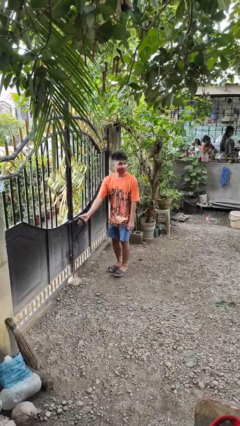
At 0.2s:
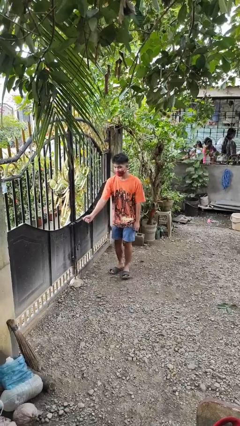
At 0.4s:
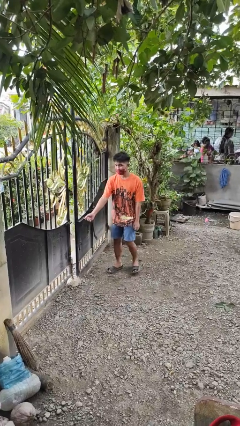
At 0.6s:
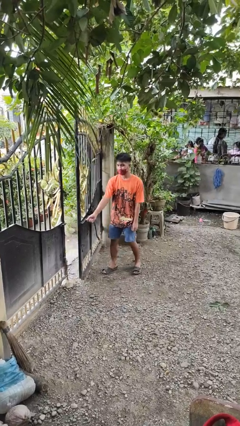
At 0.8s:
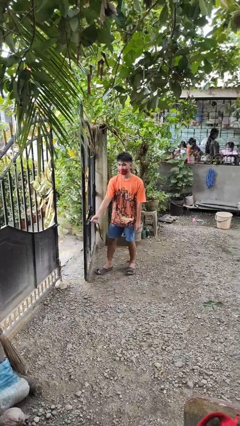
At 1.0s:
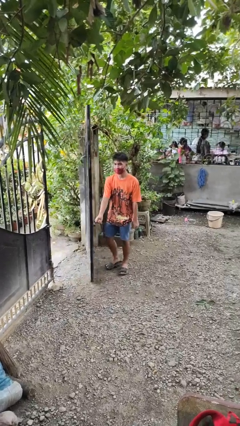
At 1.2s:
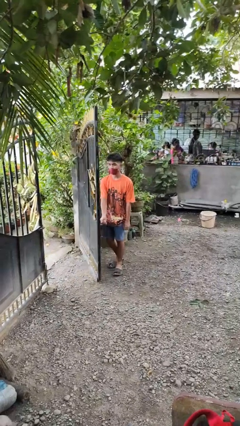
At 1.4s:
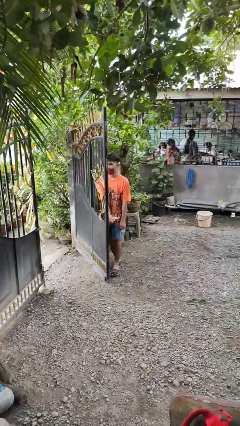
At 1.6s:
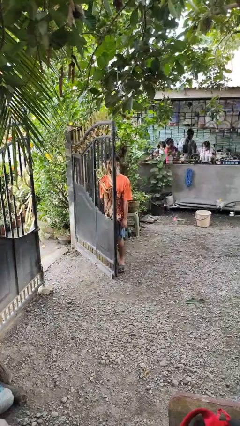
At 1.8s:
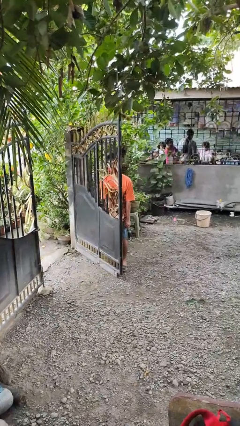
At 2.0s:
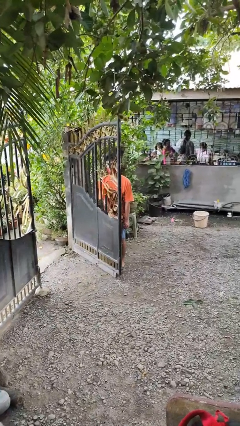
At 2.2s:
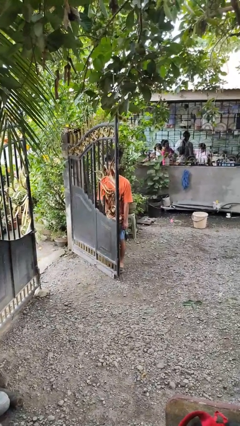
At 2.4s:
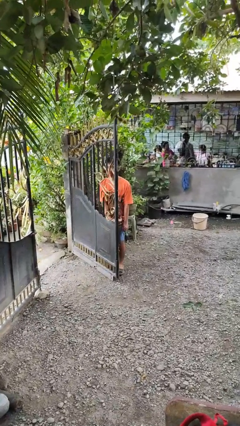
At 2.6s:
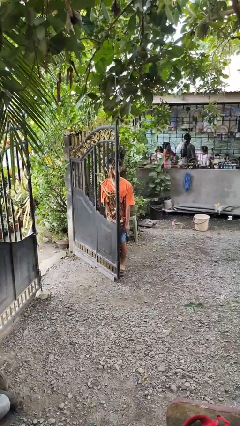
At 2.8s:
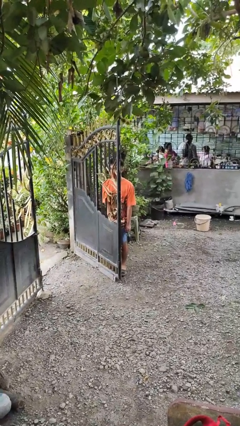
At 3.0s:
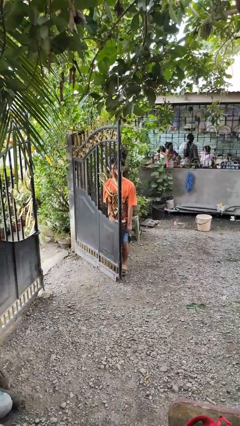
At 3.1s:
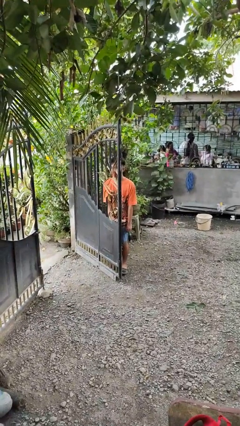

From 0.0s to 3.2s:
person opens gate

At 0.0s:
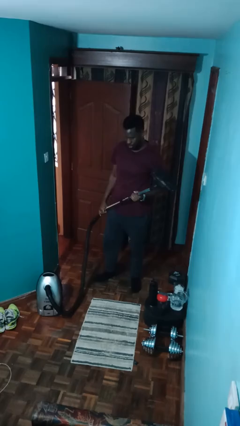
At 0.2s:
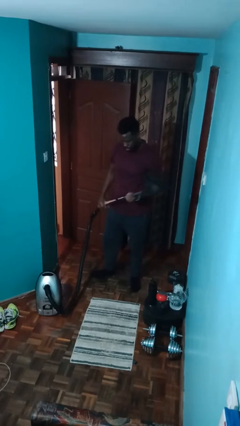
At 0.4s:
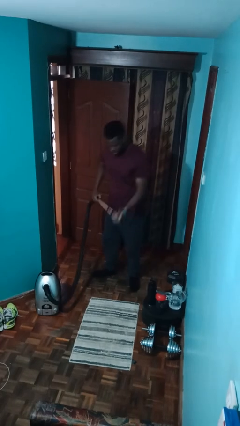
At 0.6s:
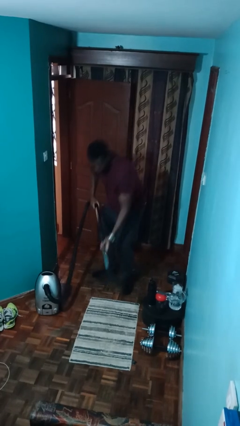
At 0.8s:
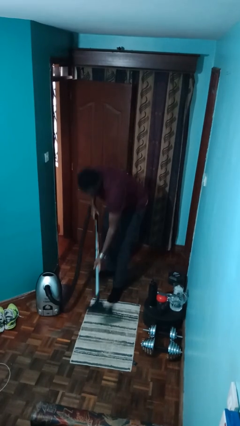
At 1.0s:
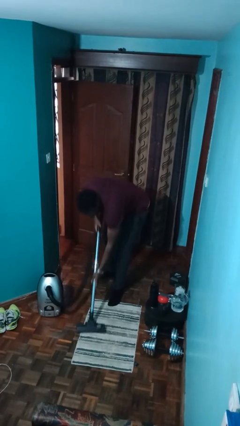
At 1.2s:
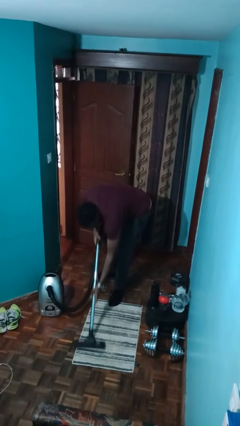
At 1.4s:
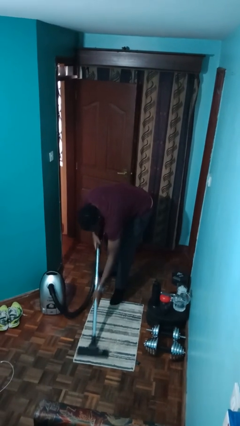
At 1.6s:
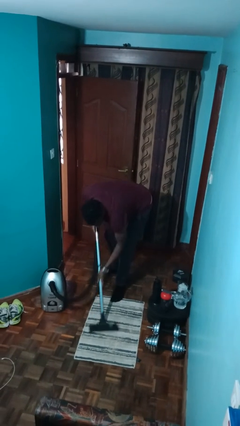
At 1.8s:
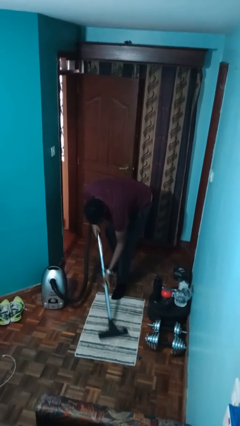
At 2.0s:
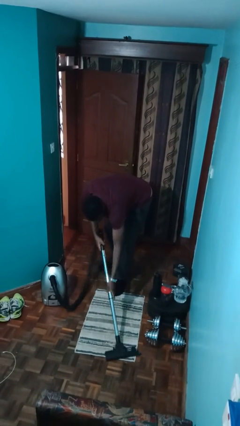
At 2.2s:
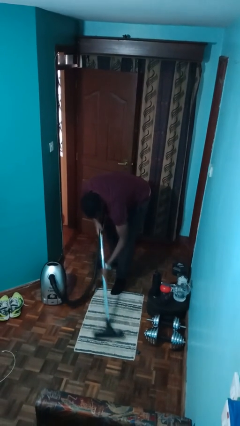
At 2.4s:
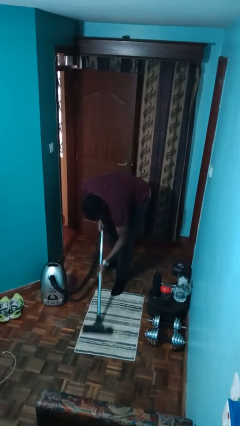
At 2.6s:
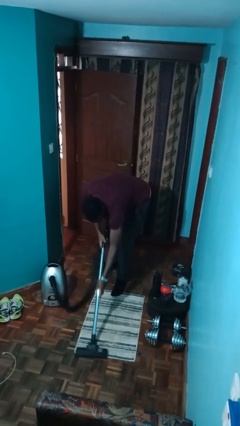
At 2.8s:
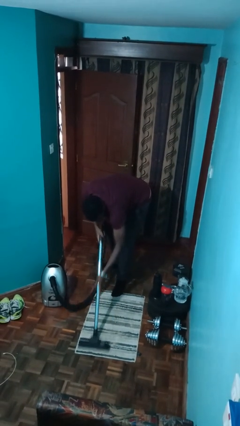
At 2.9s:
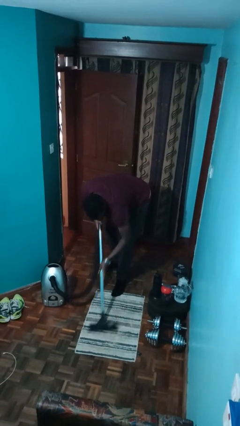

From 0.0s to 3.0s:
person vacuums carpet

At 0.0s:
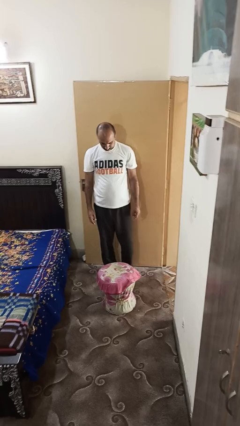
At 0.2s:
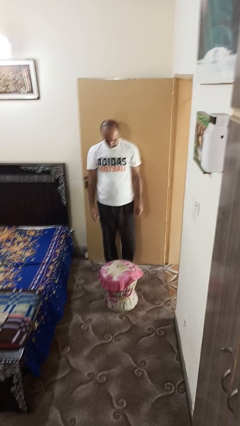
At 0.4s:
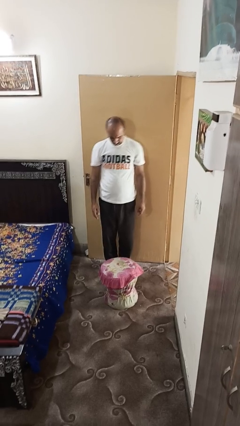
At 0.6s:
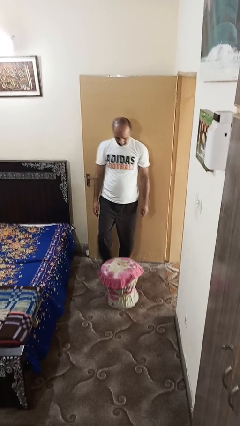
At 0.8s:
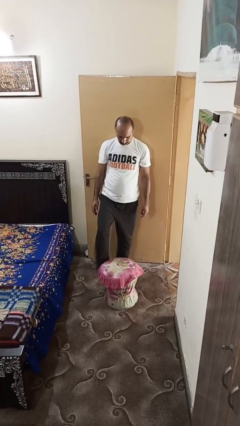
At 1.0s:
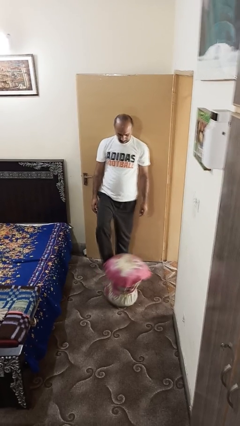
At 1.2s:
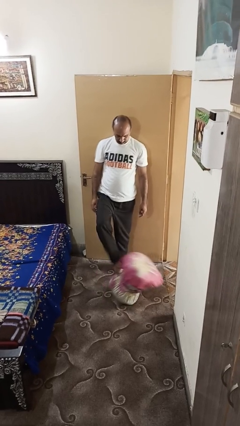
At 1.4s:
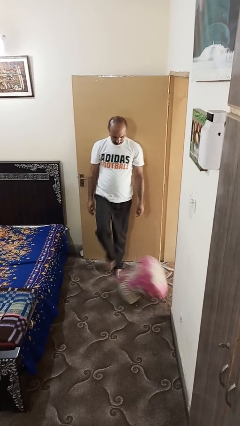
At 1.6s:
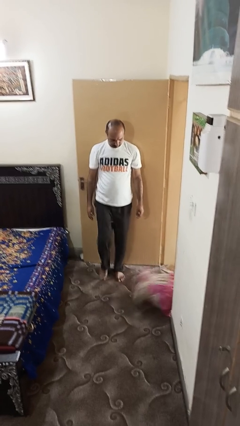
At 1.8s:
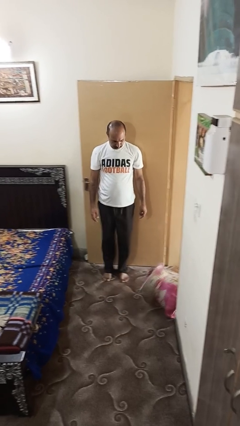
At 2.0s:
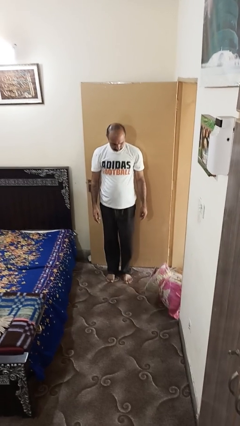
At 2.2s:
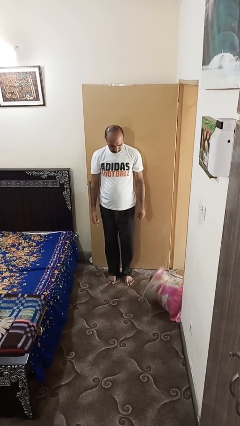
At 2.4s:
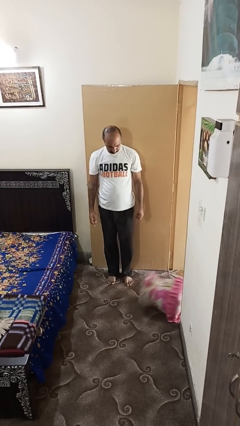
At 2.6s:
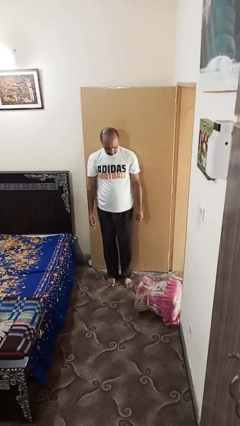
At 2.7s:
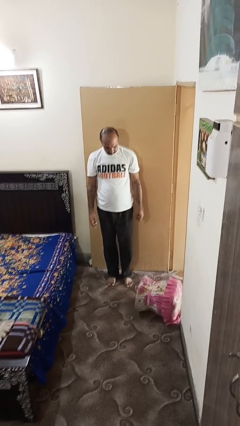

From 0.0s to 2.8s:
person knocks over furniture

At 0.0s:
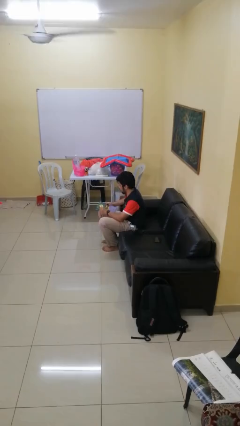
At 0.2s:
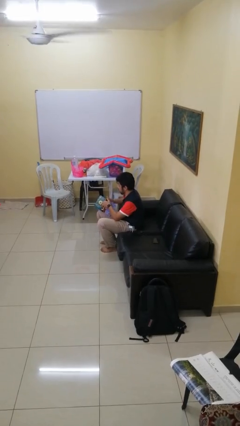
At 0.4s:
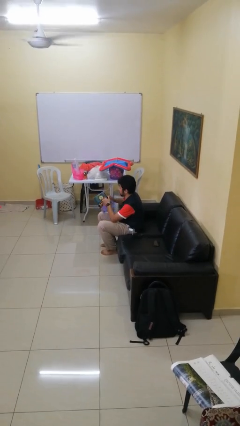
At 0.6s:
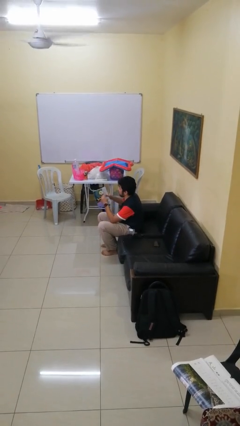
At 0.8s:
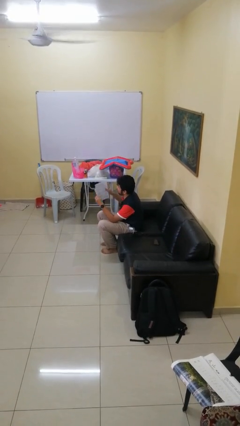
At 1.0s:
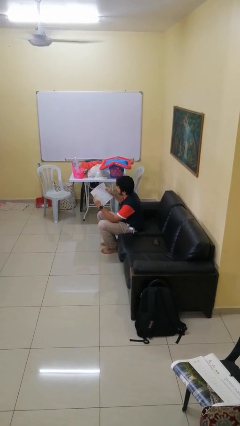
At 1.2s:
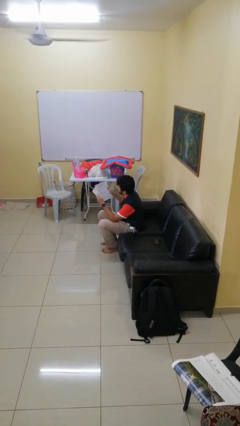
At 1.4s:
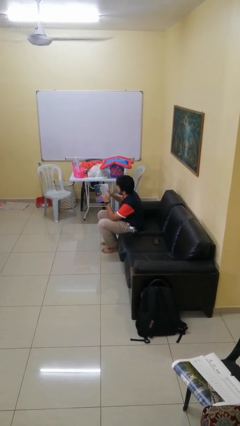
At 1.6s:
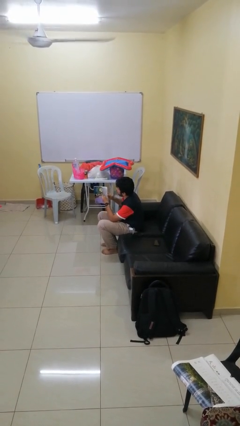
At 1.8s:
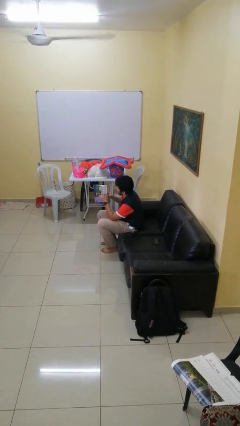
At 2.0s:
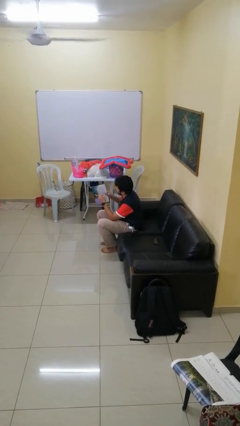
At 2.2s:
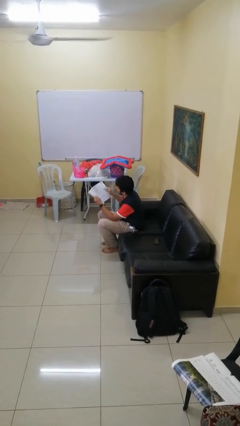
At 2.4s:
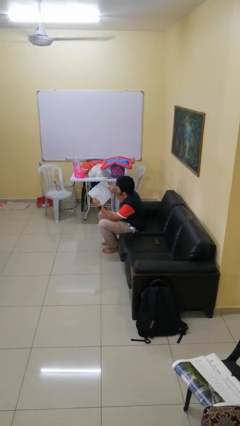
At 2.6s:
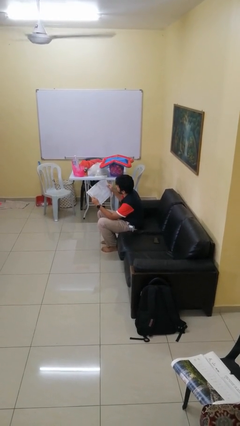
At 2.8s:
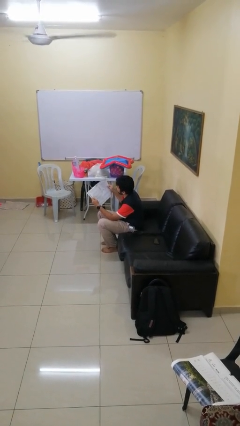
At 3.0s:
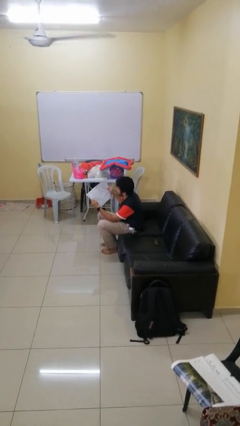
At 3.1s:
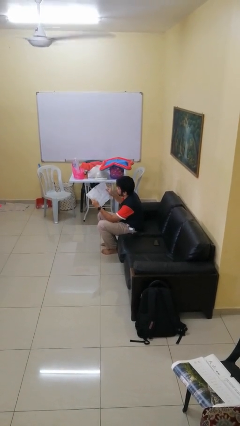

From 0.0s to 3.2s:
person reads magazine

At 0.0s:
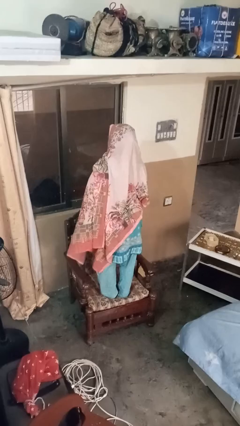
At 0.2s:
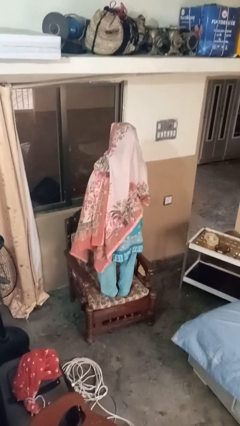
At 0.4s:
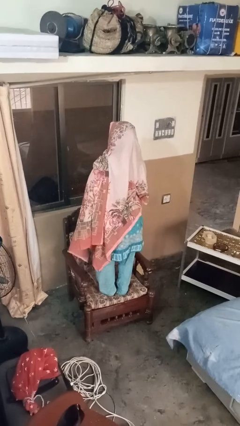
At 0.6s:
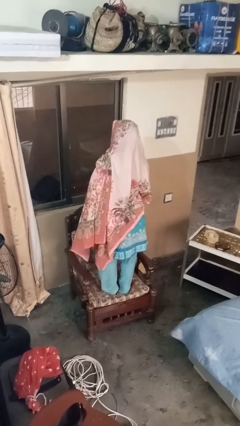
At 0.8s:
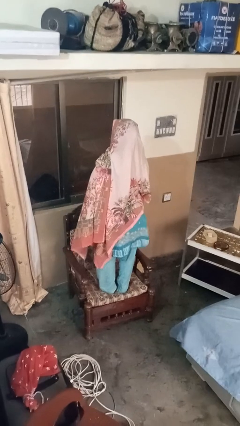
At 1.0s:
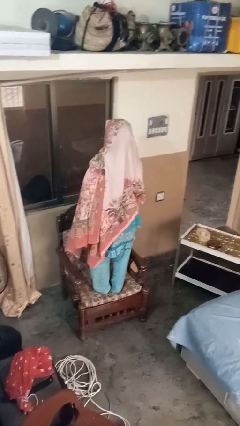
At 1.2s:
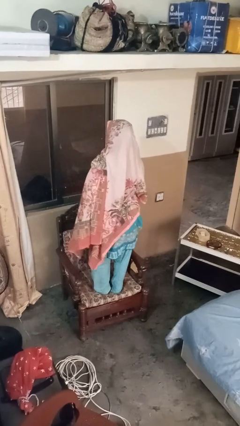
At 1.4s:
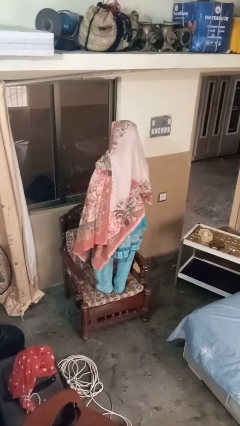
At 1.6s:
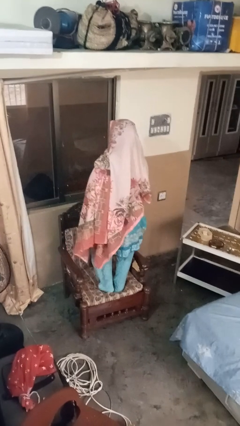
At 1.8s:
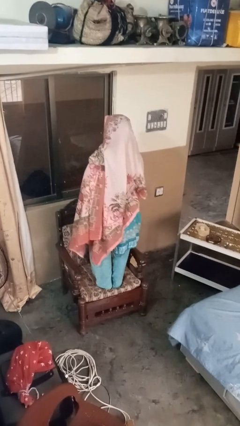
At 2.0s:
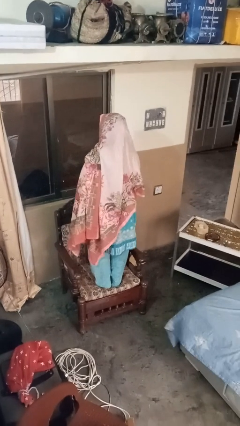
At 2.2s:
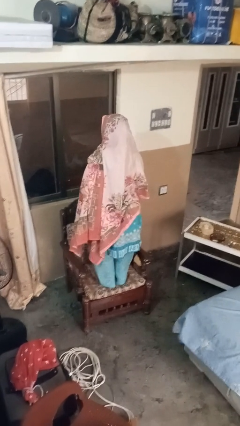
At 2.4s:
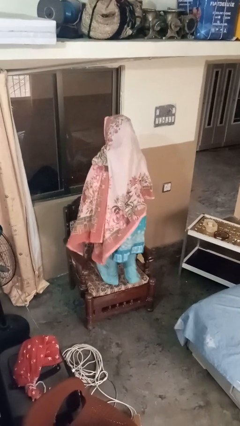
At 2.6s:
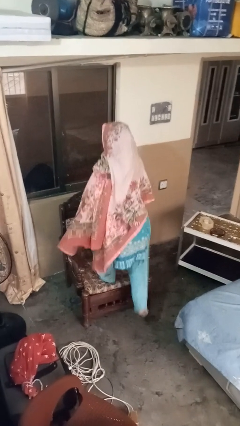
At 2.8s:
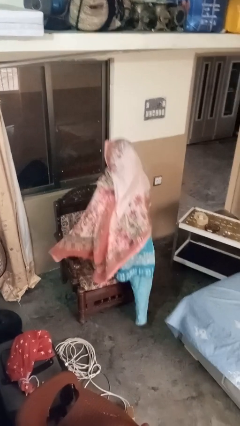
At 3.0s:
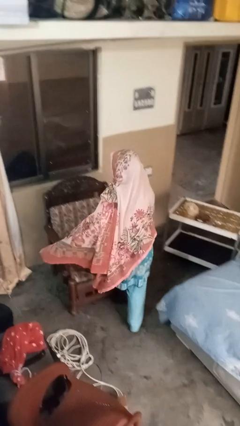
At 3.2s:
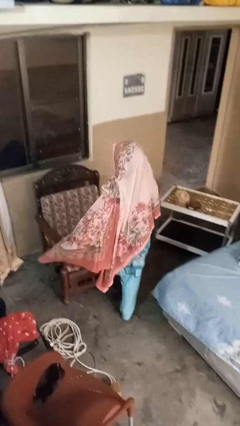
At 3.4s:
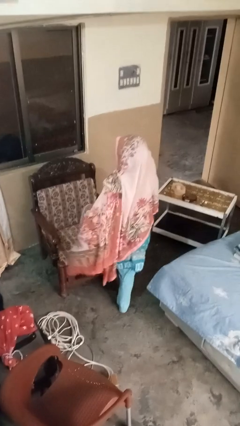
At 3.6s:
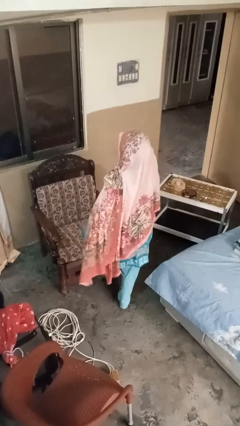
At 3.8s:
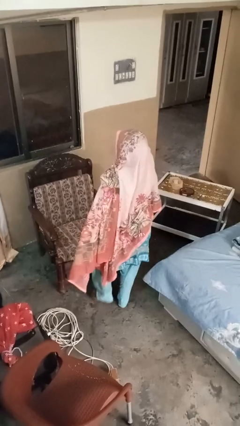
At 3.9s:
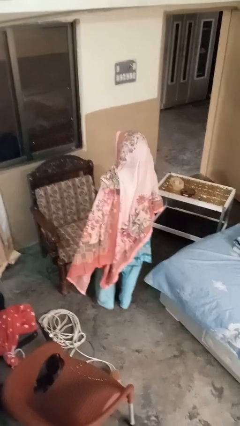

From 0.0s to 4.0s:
person climbs off couch

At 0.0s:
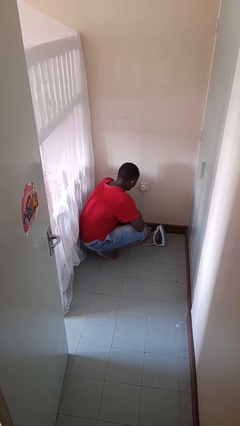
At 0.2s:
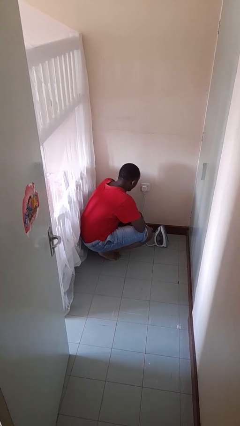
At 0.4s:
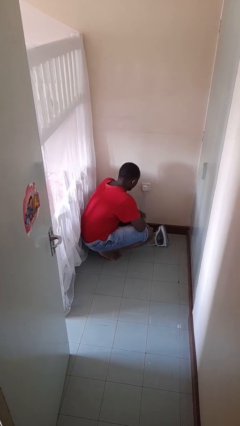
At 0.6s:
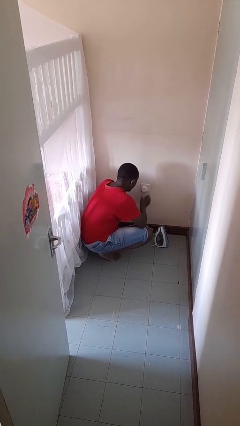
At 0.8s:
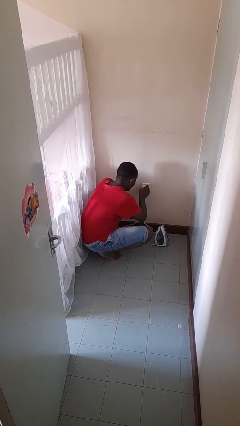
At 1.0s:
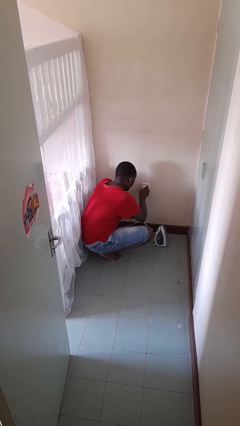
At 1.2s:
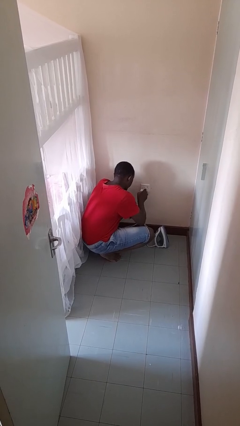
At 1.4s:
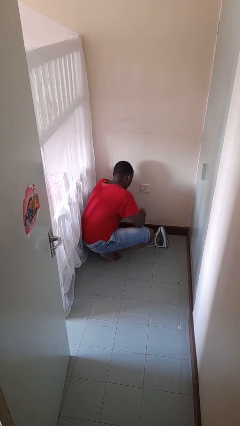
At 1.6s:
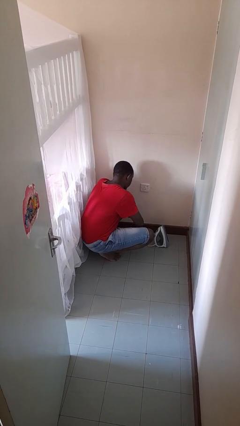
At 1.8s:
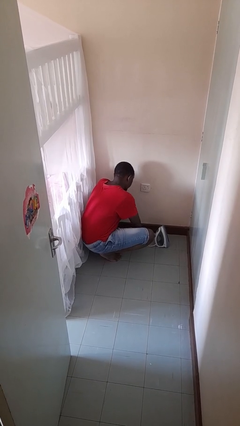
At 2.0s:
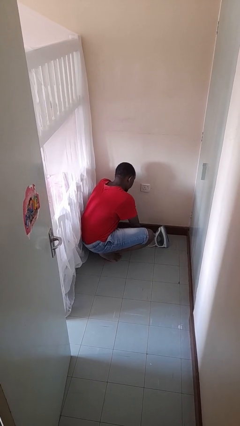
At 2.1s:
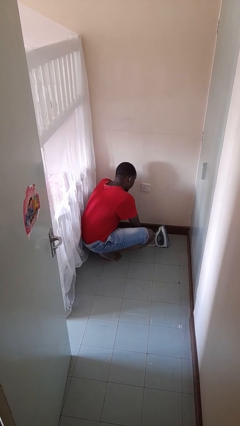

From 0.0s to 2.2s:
person unplugs from electrical socket
